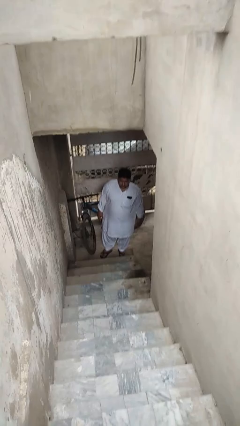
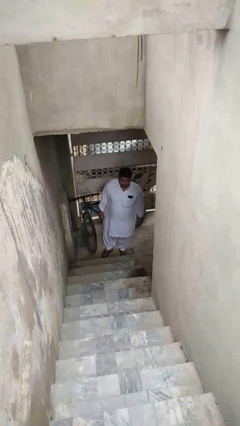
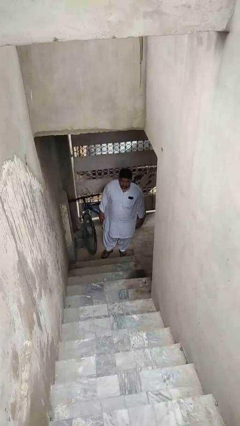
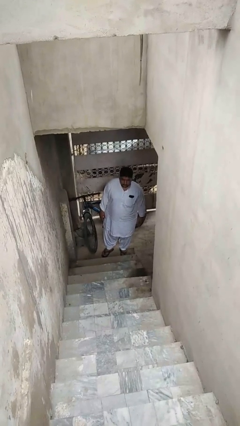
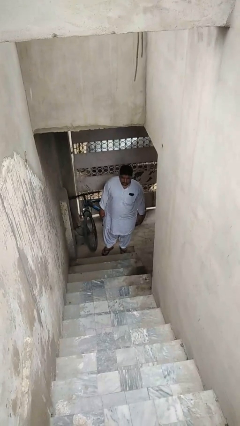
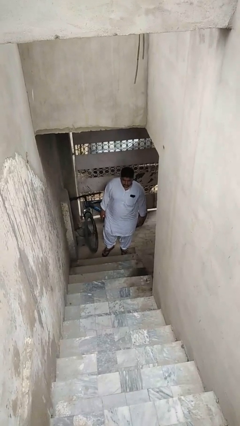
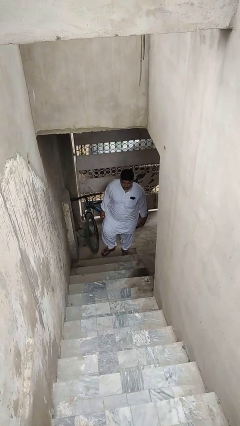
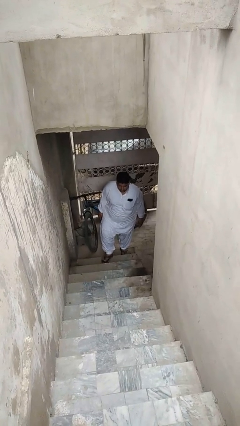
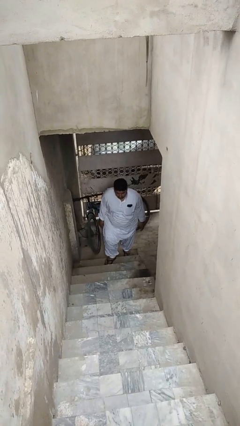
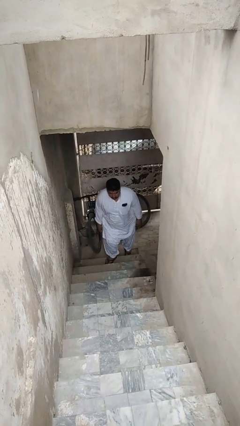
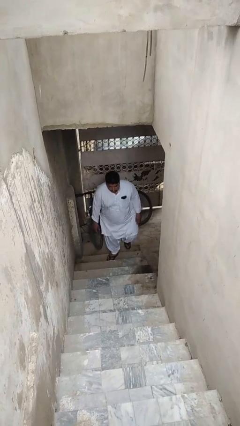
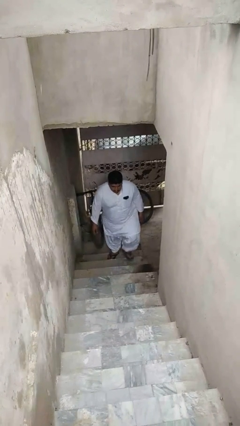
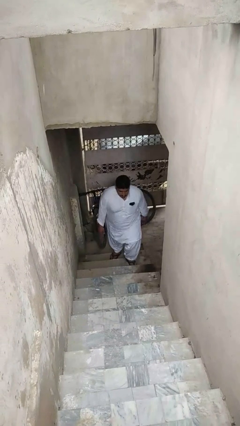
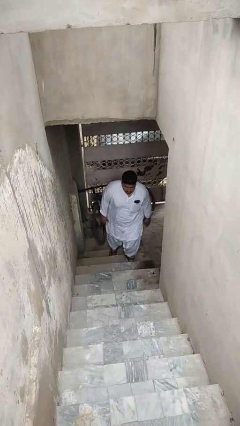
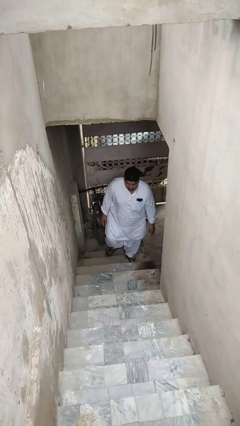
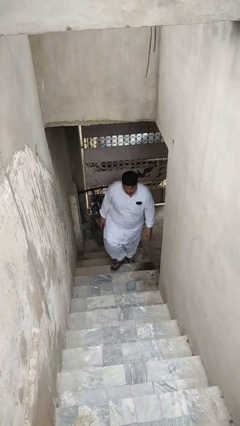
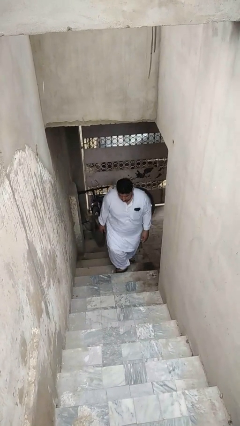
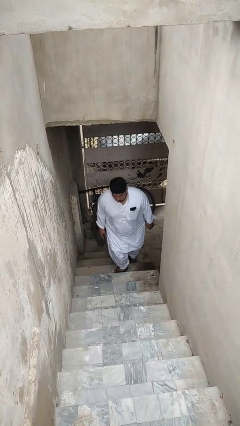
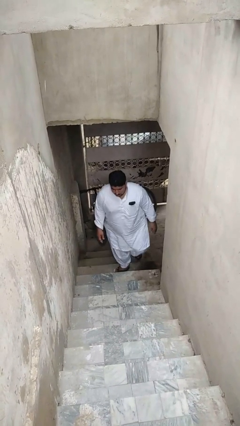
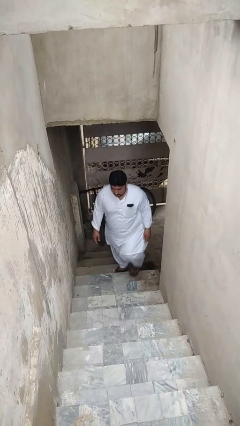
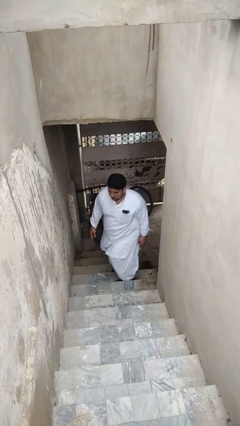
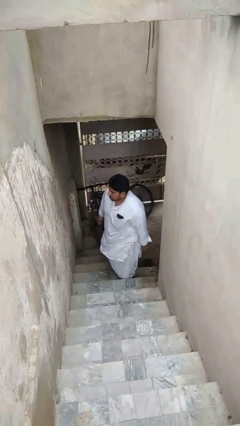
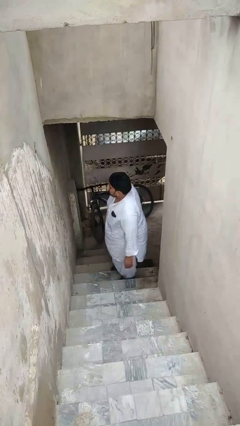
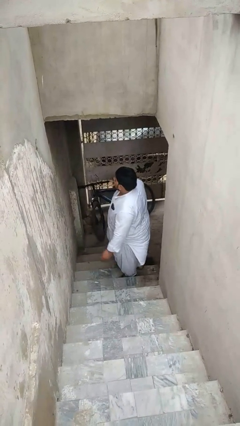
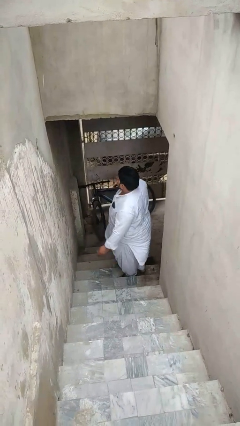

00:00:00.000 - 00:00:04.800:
person climbs up stairs

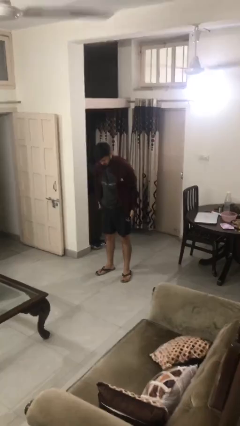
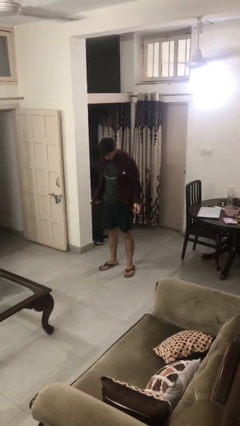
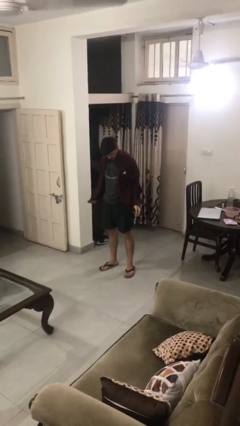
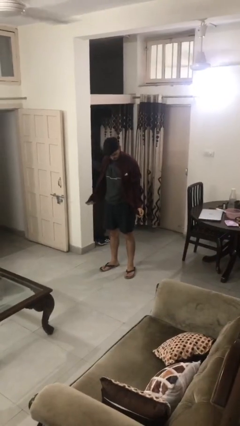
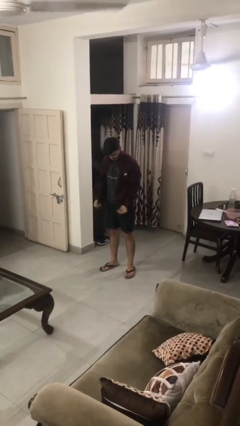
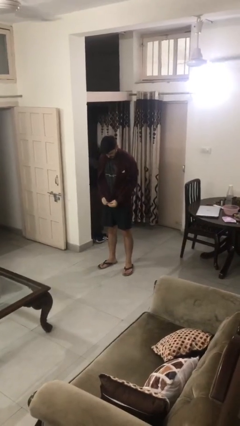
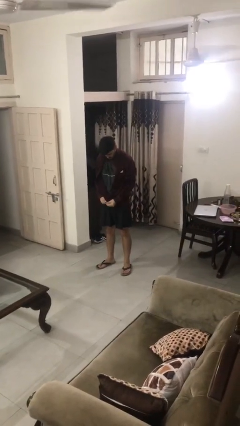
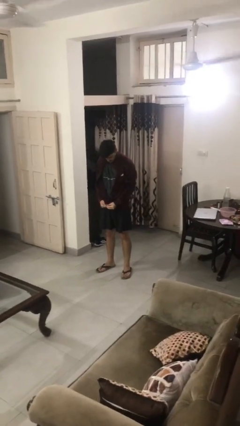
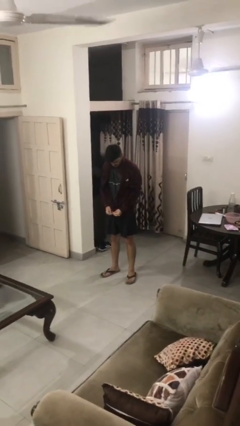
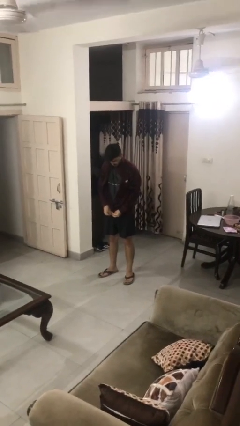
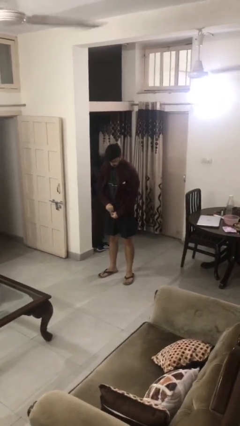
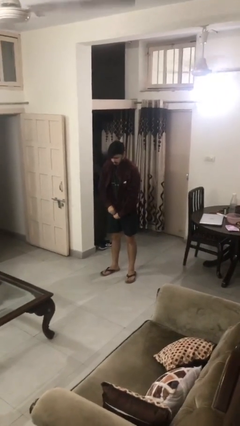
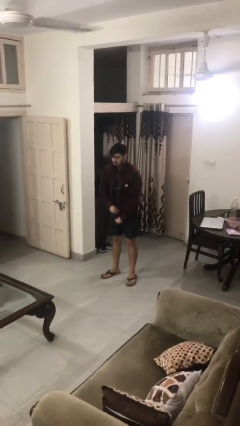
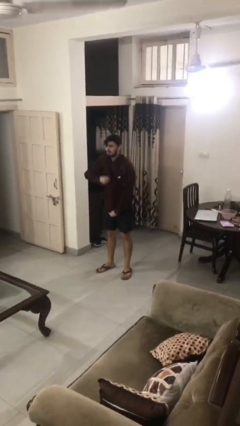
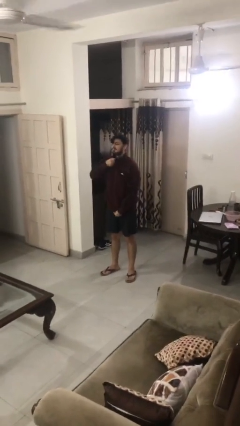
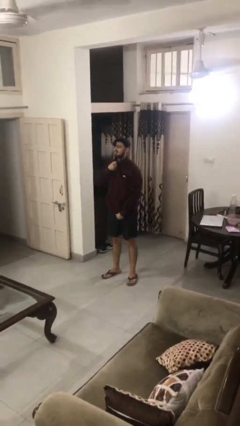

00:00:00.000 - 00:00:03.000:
person zips up jacket

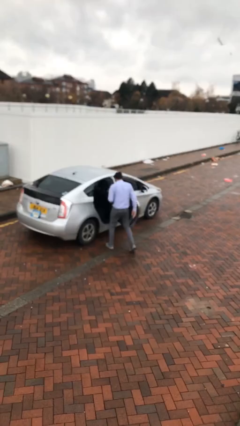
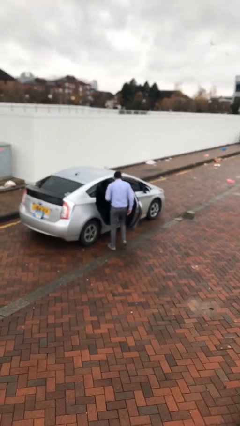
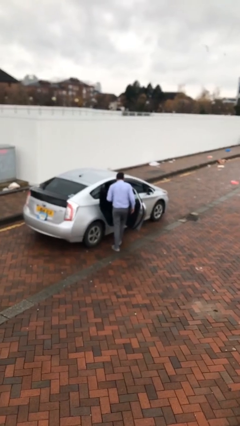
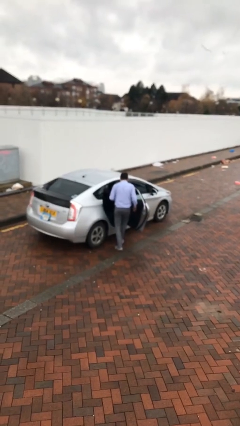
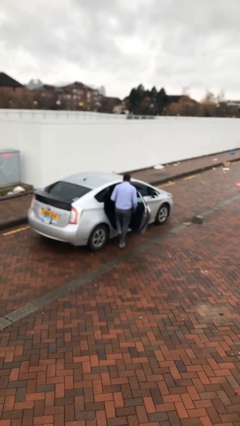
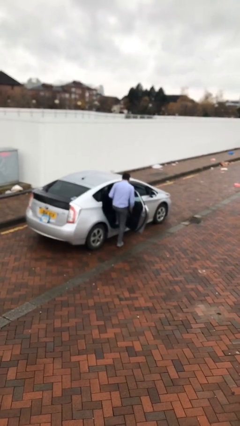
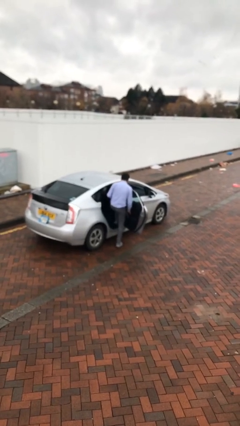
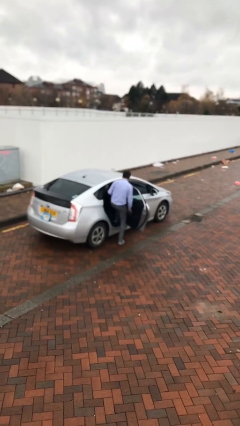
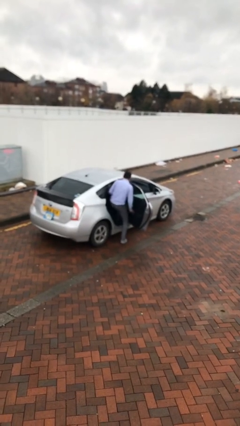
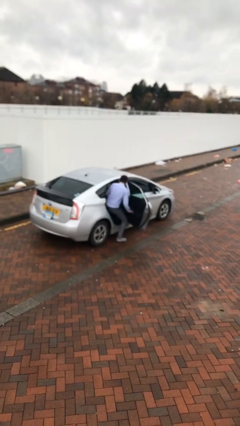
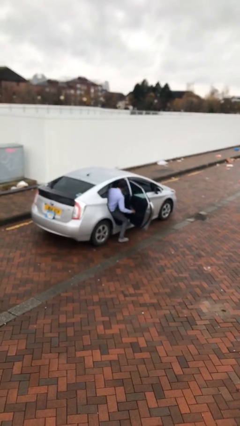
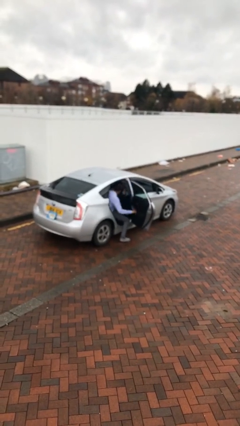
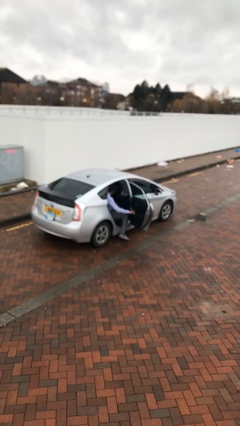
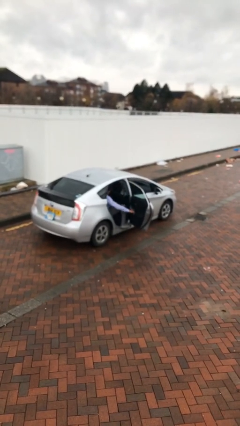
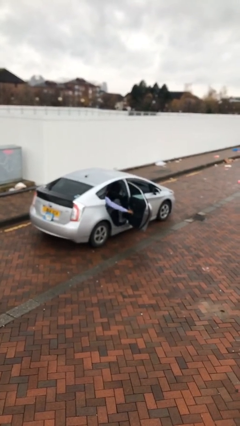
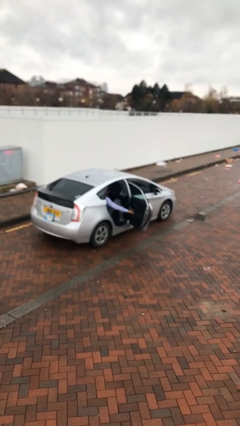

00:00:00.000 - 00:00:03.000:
person enters car

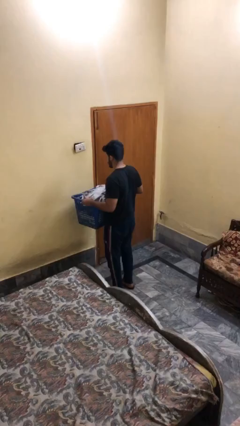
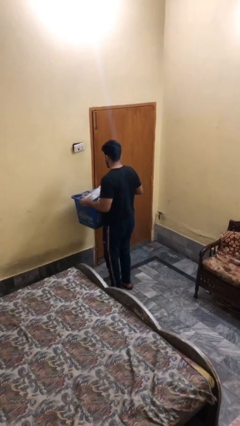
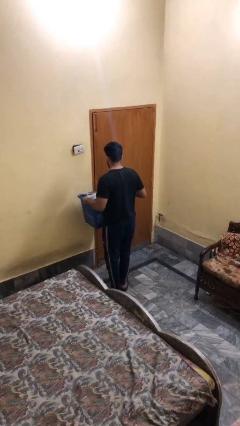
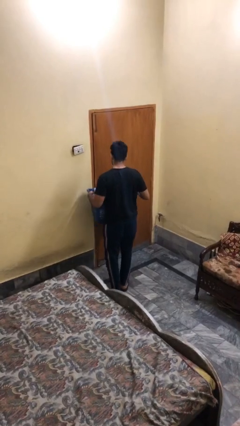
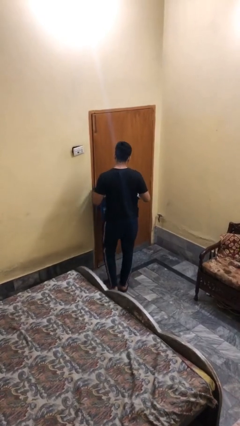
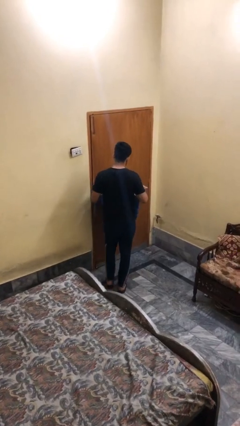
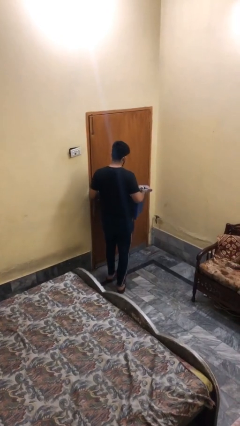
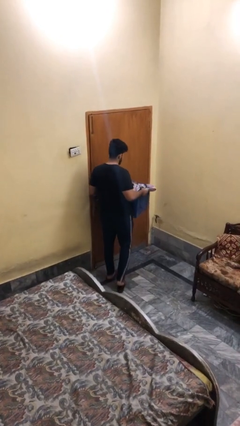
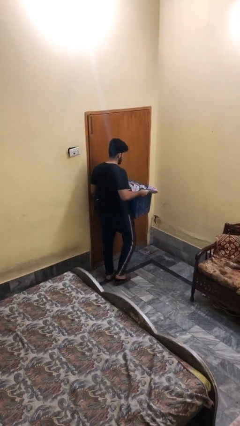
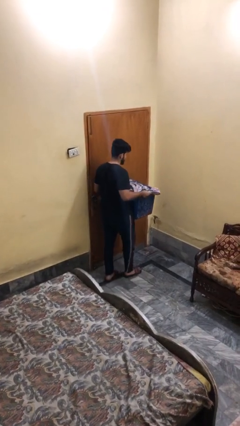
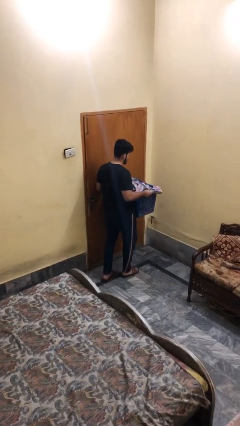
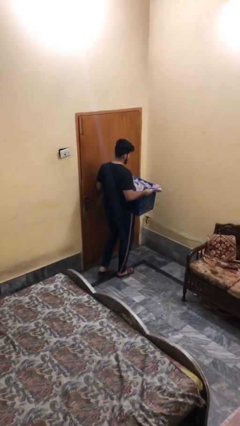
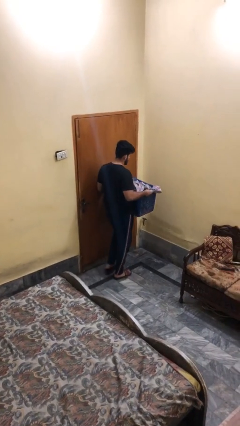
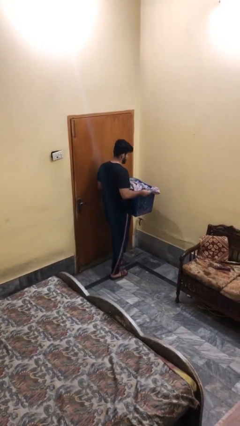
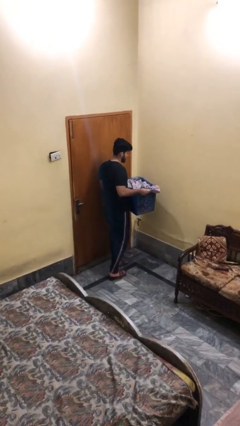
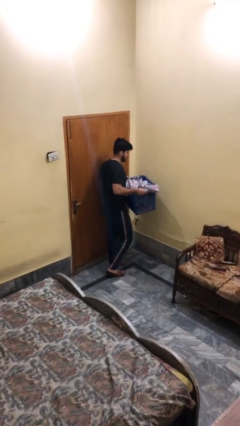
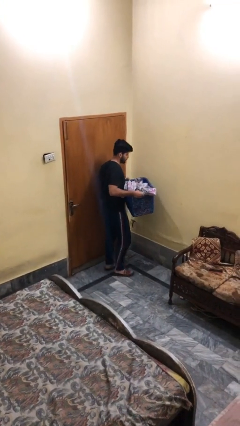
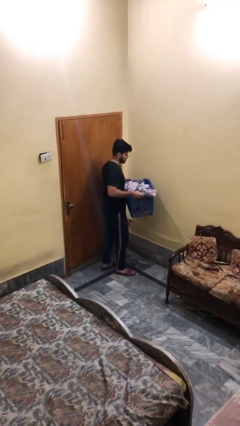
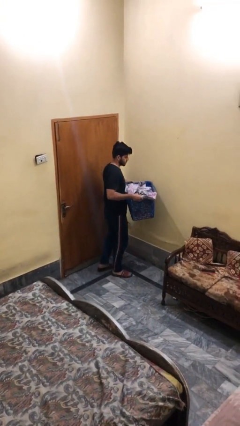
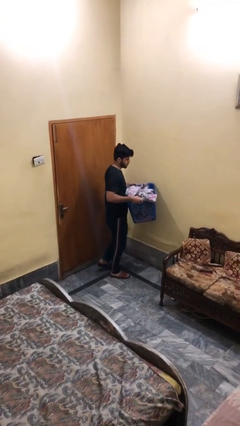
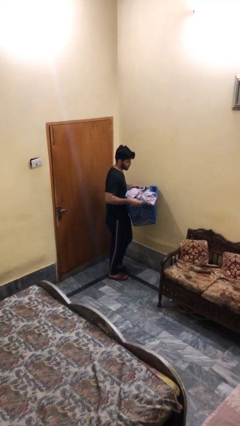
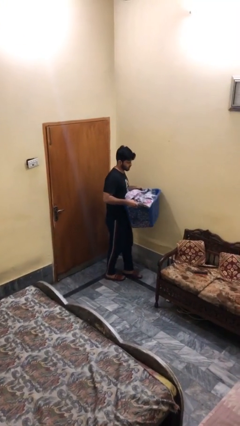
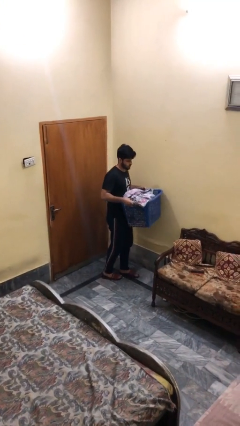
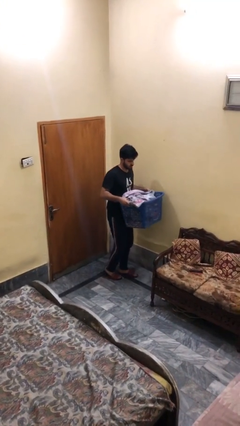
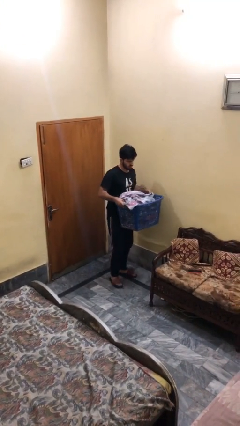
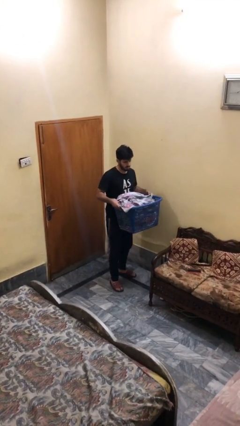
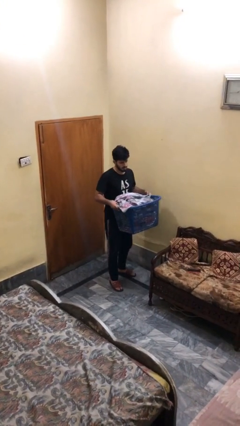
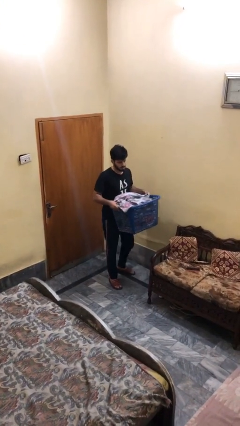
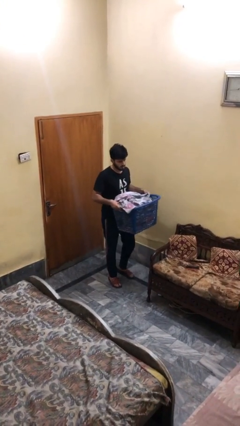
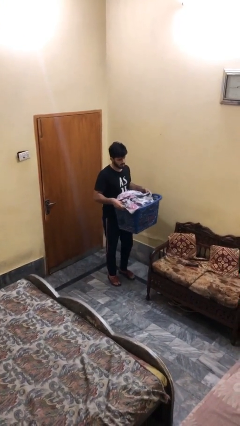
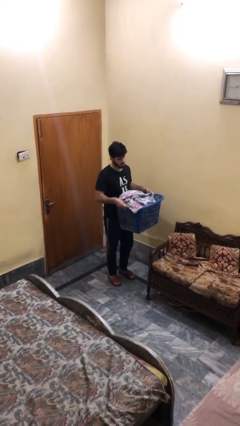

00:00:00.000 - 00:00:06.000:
person carries laundry basket

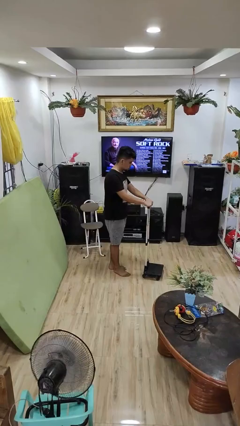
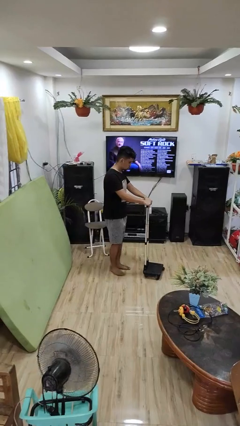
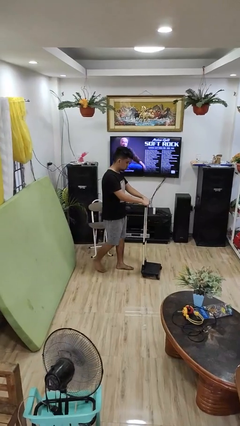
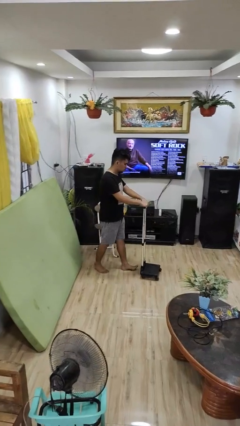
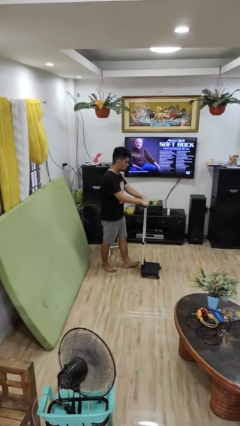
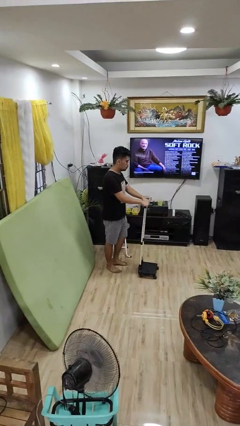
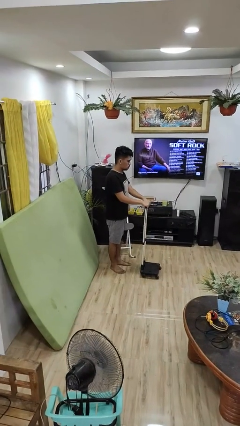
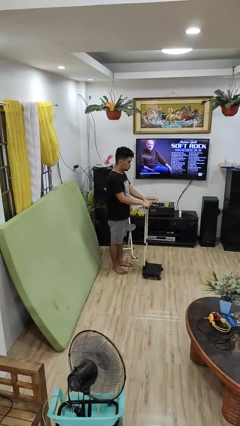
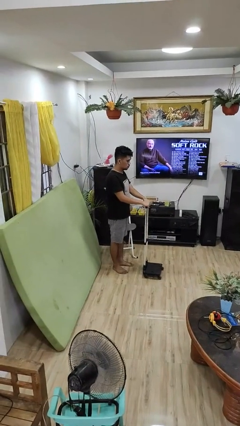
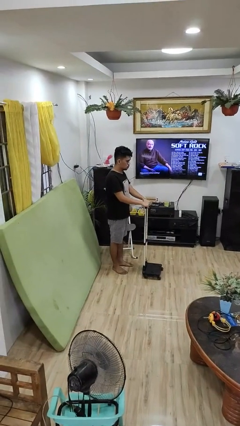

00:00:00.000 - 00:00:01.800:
person pulls wheeled cart
